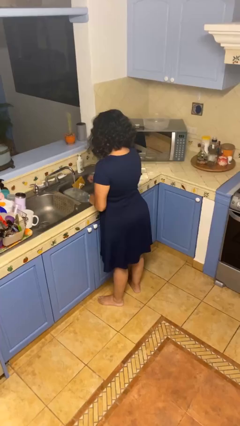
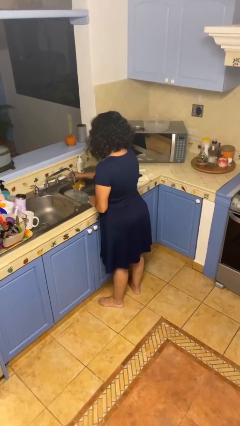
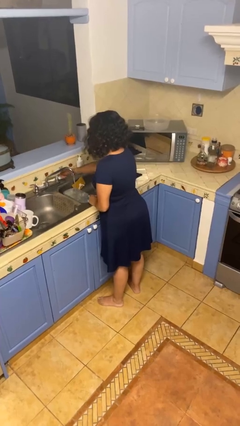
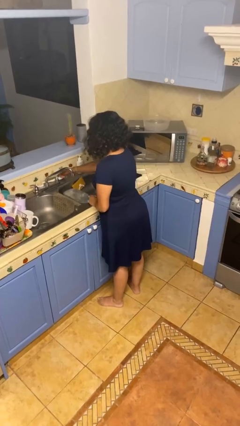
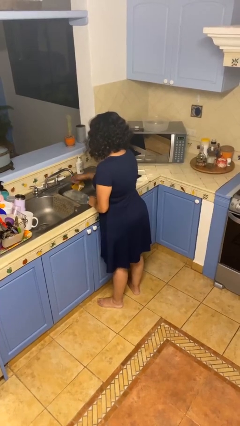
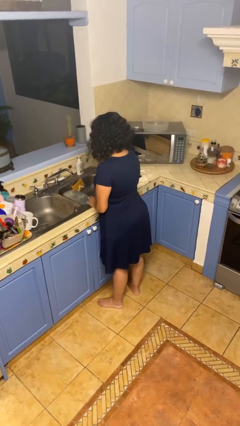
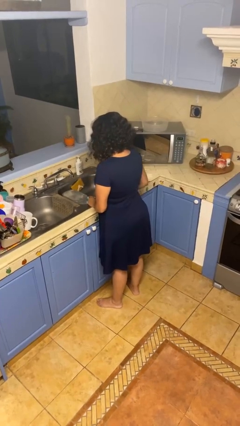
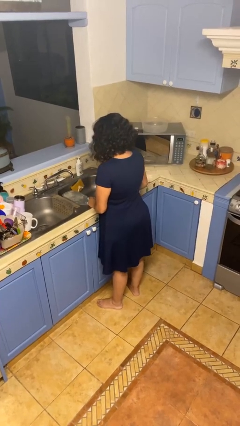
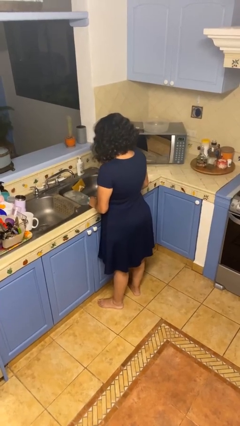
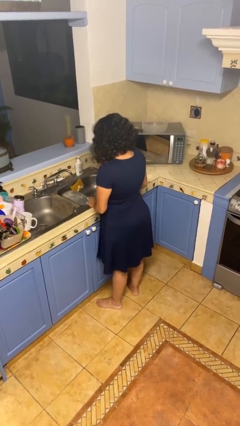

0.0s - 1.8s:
person turns off faucet

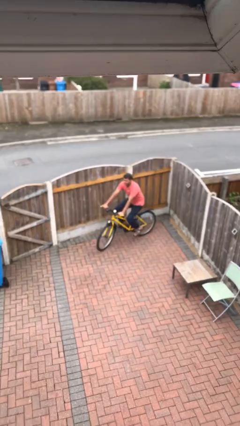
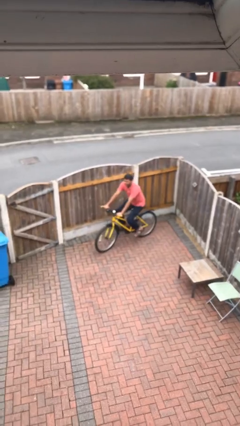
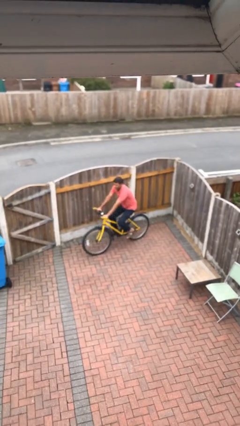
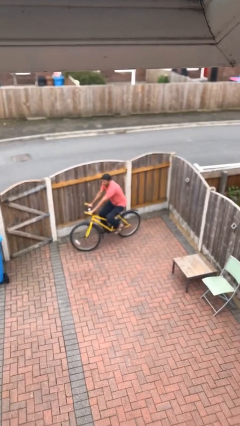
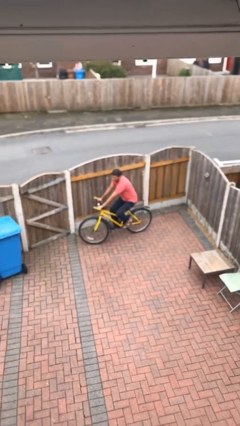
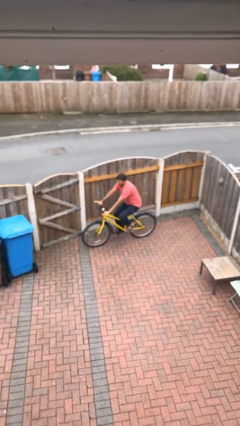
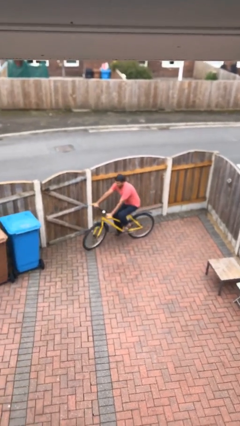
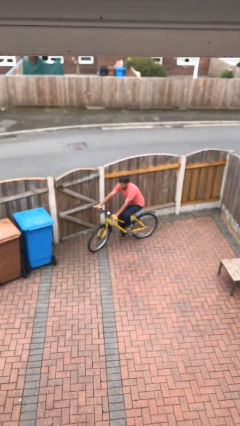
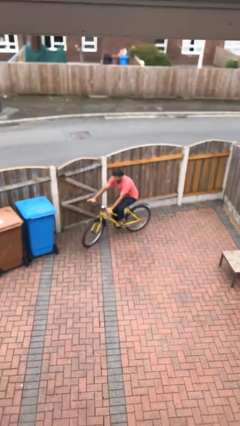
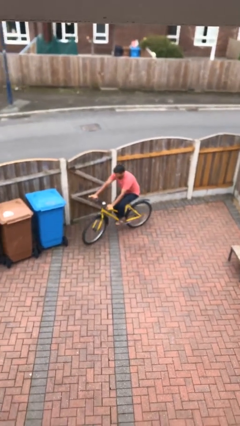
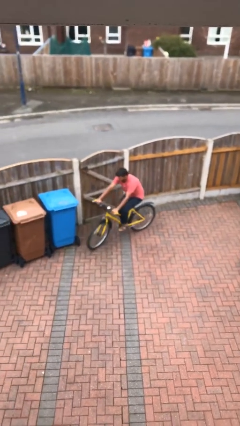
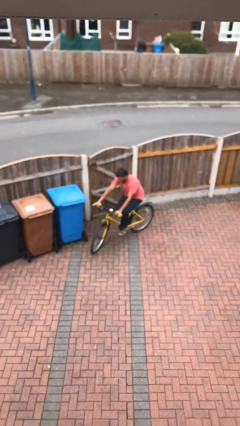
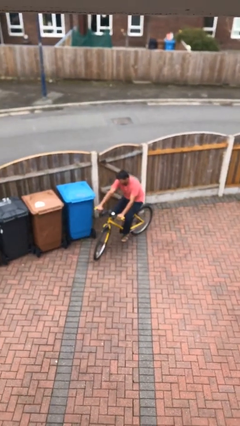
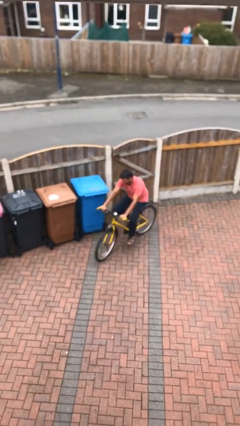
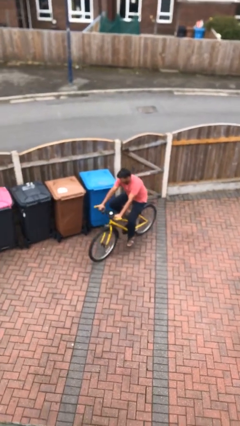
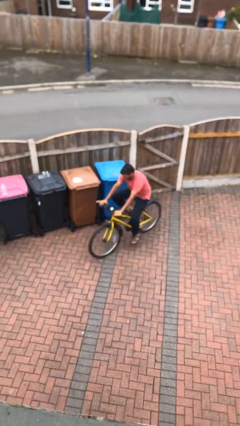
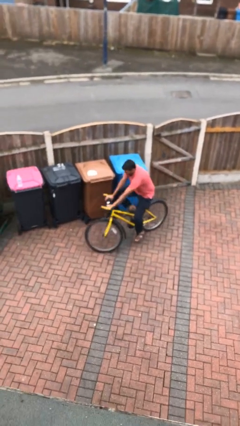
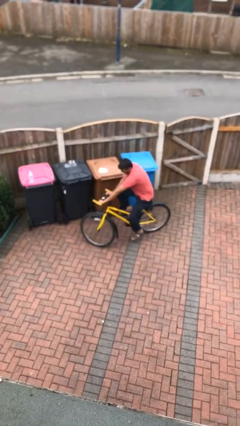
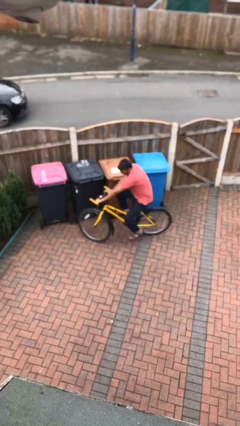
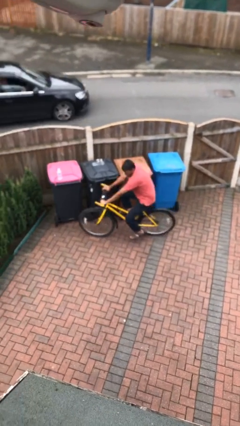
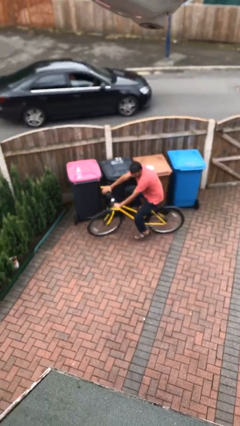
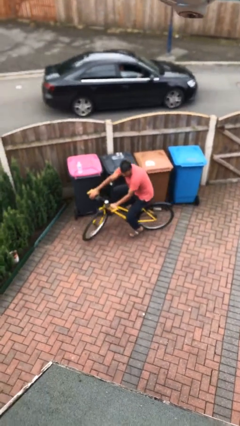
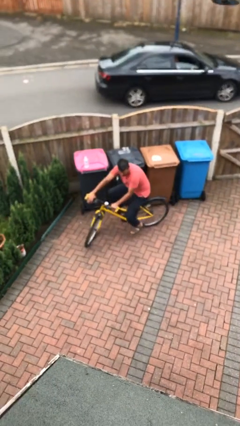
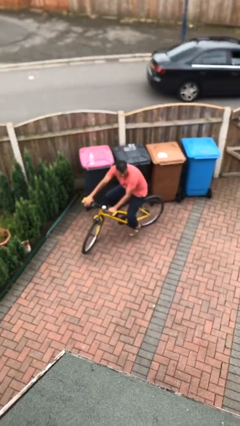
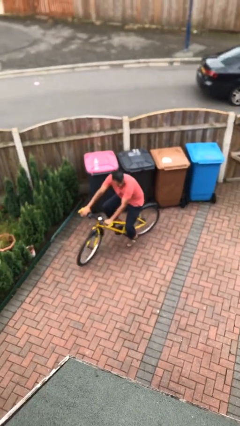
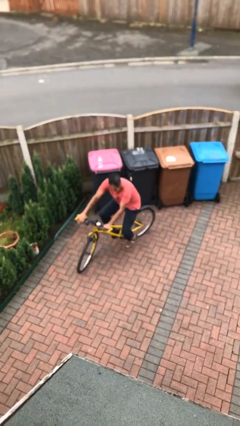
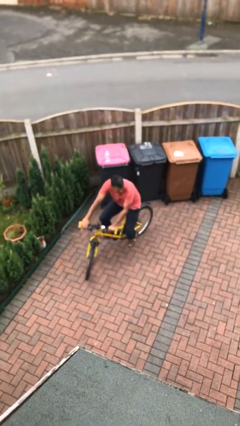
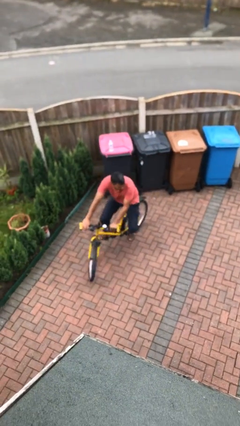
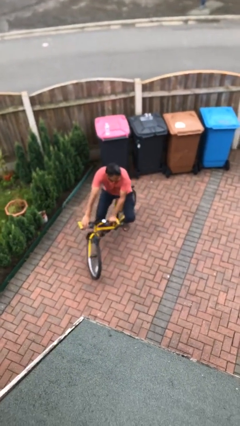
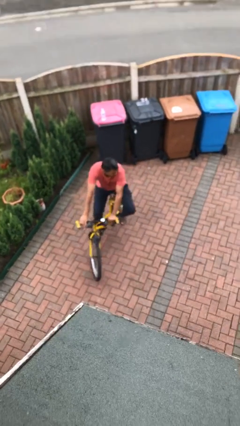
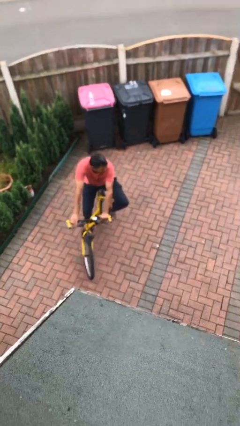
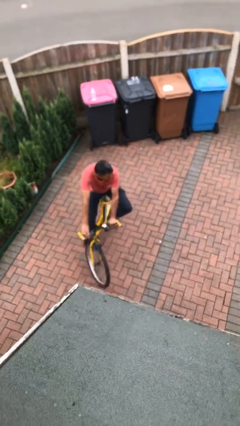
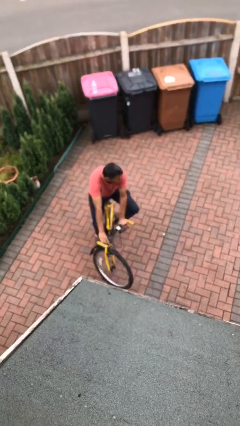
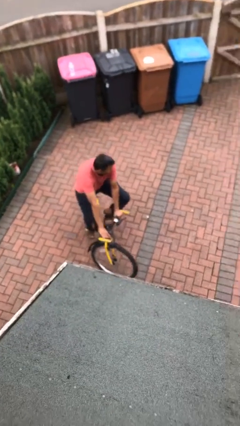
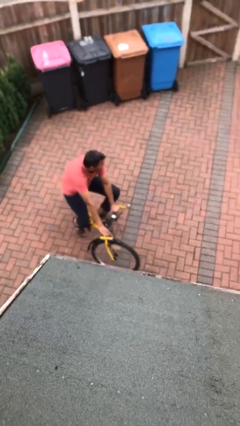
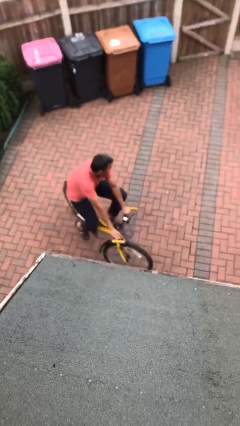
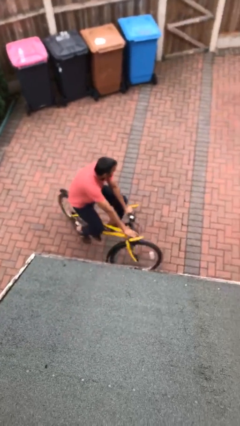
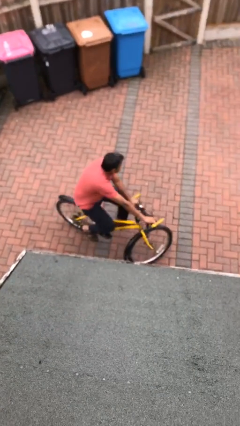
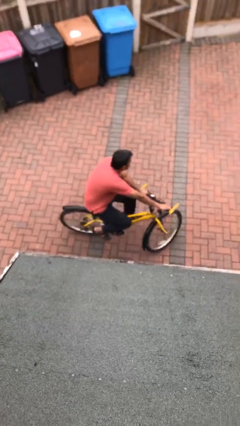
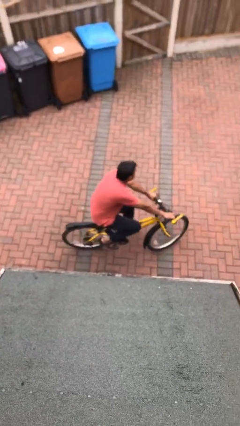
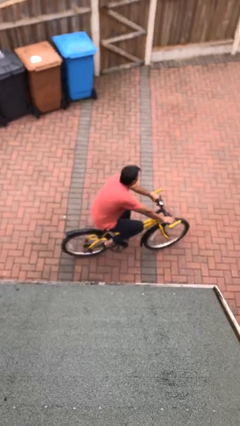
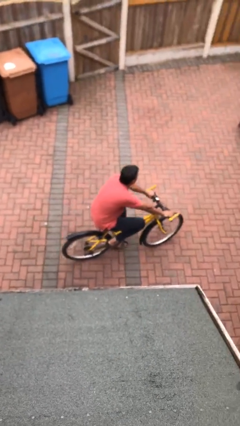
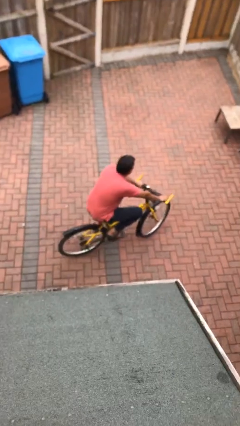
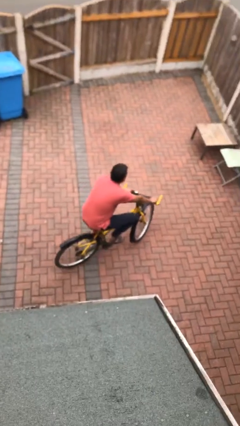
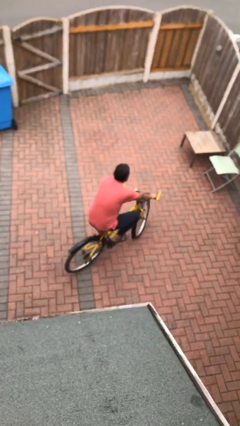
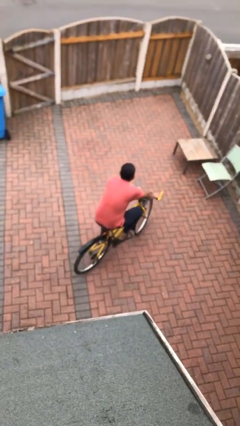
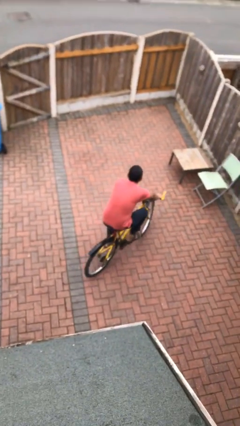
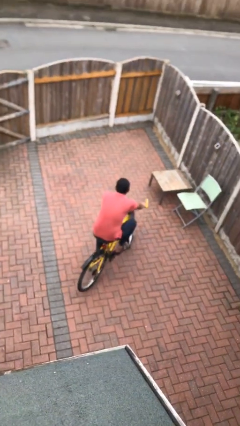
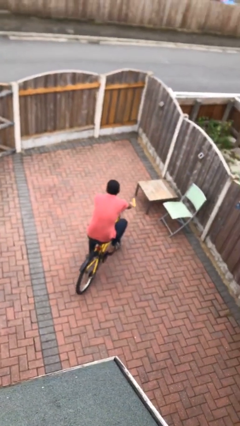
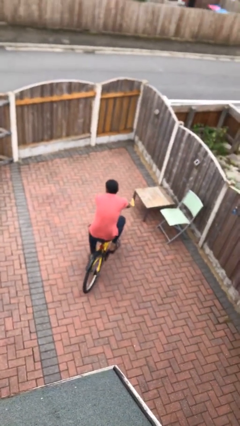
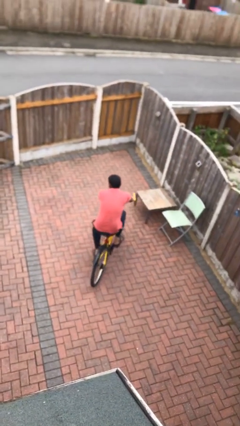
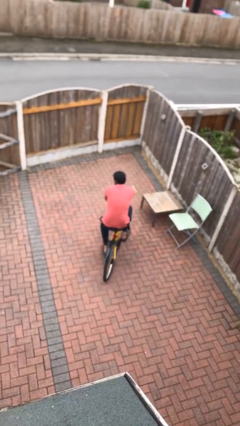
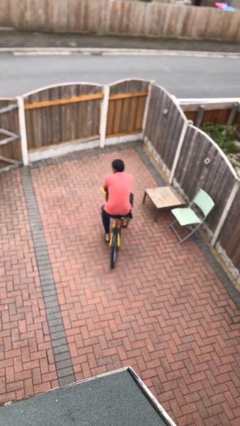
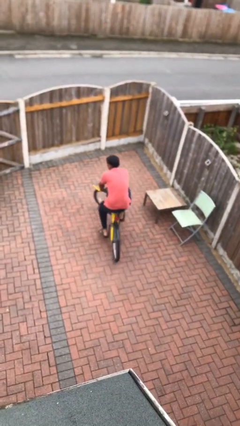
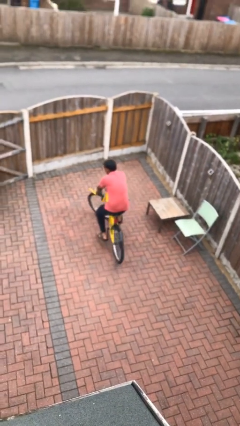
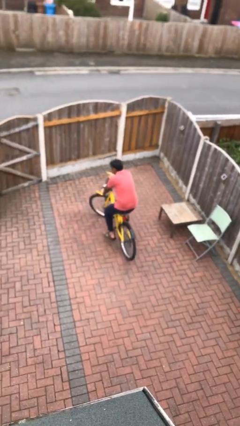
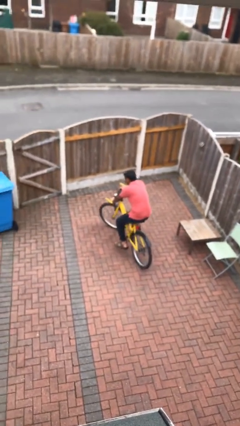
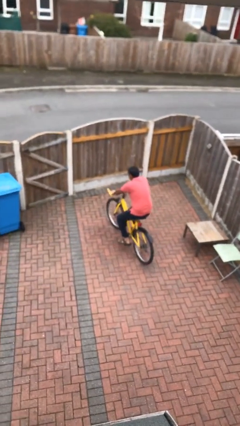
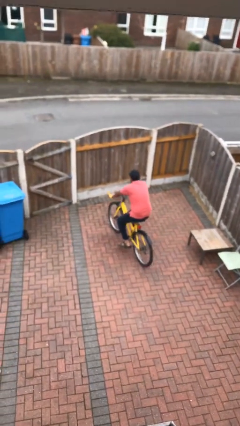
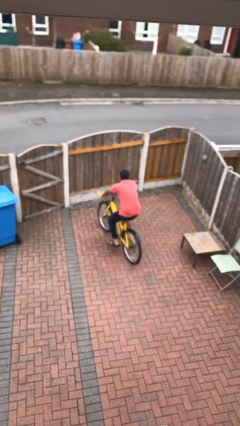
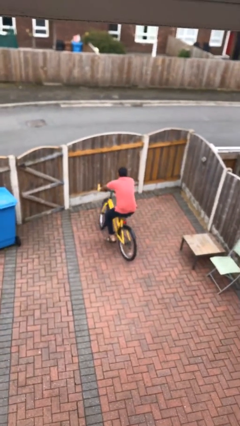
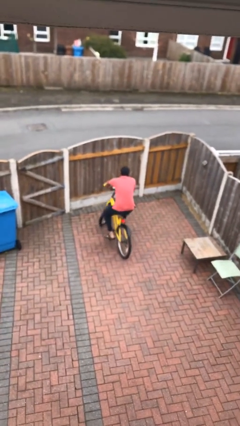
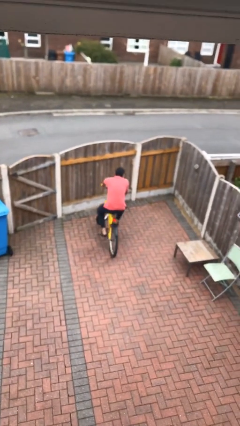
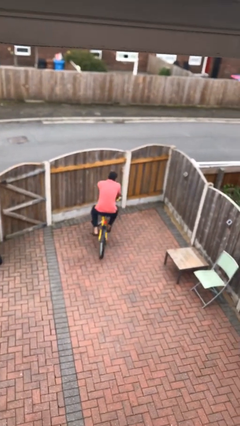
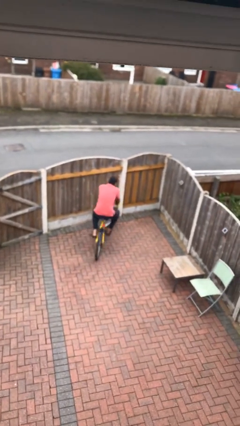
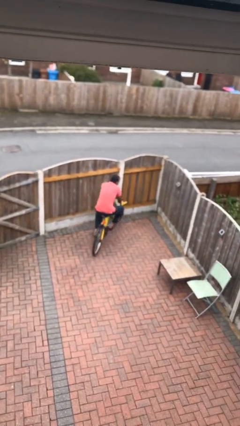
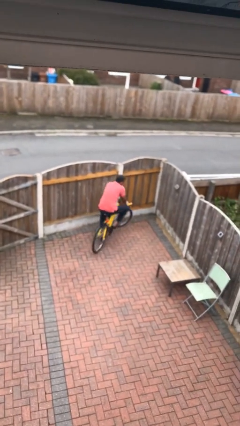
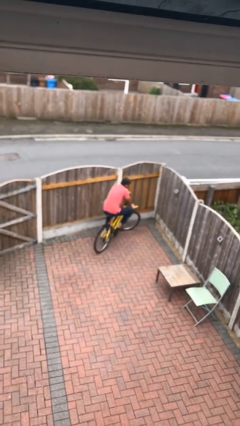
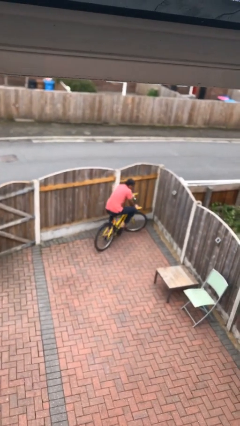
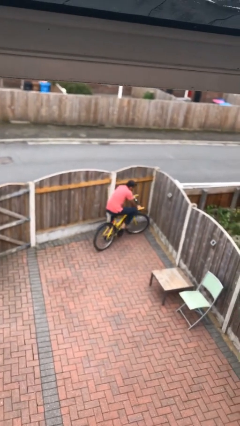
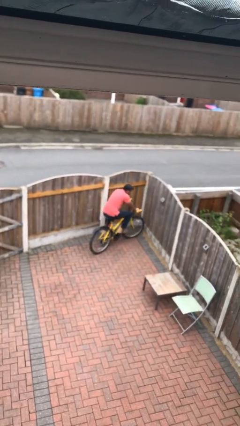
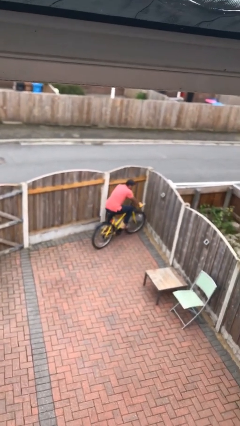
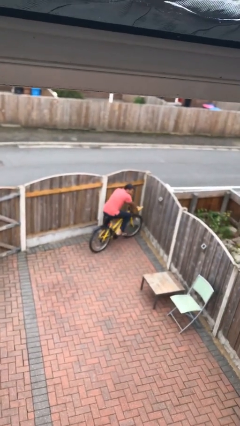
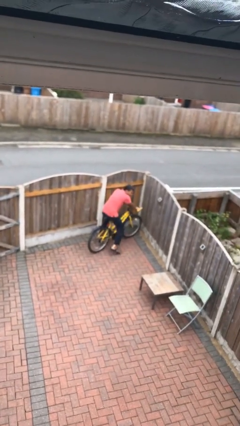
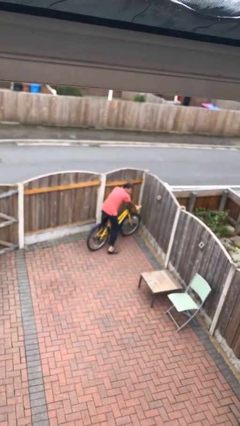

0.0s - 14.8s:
person rides bicycle

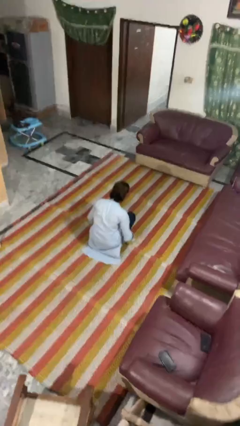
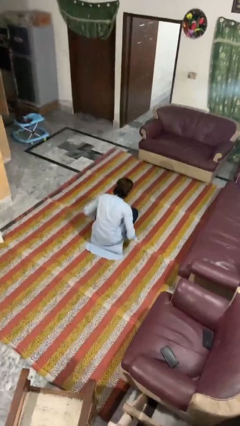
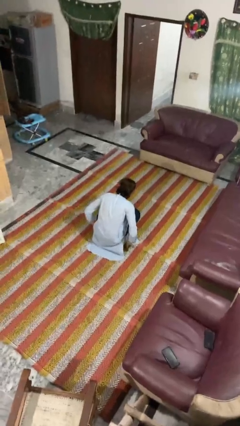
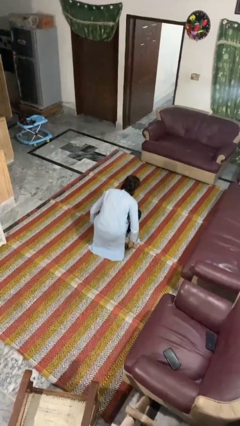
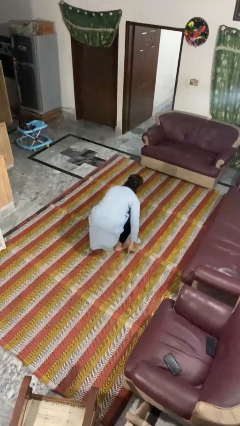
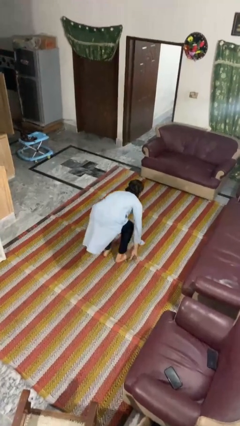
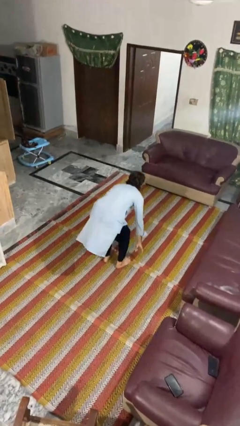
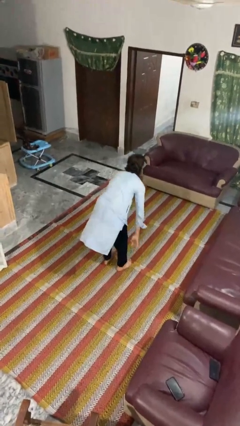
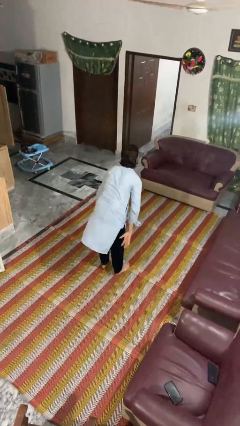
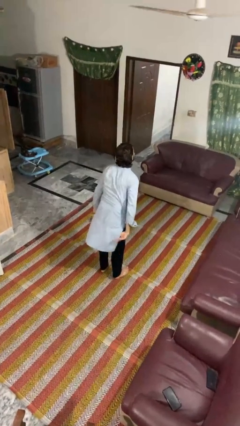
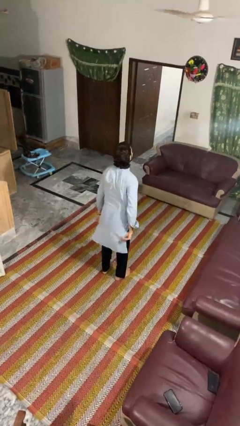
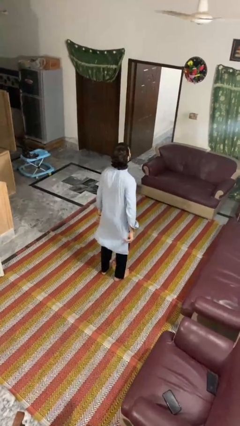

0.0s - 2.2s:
person stands up
